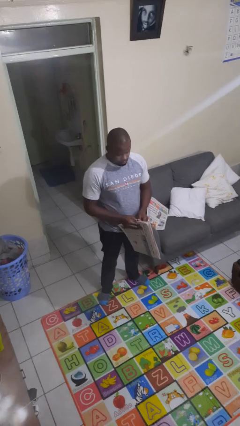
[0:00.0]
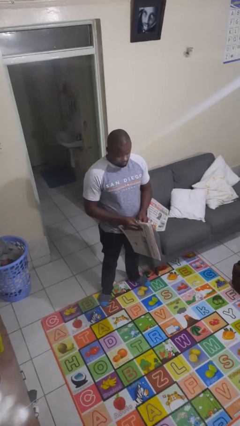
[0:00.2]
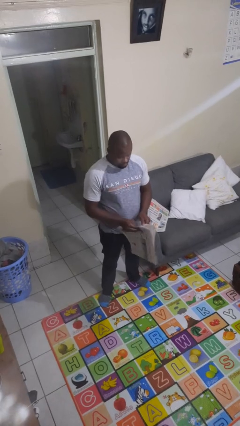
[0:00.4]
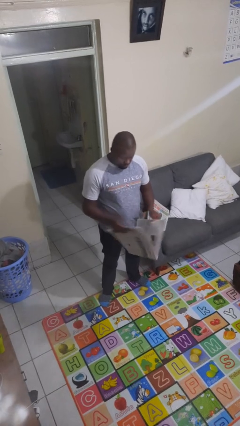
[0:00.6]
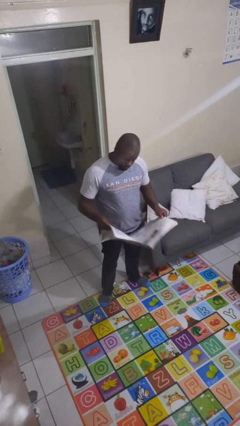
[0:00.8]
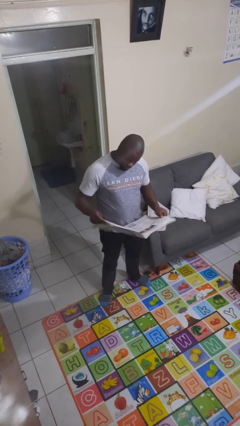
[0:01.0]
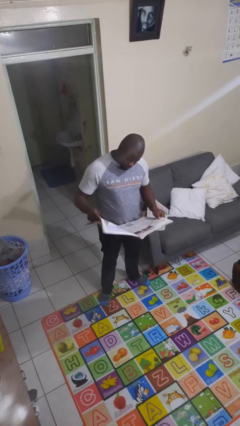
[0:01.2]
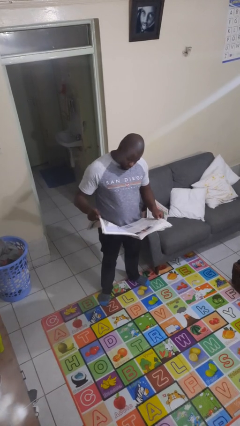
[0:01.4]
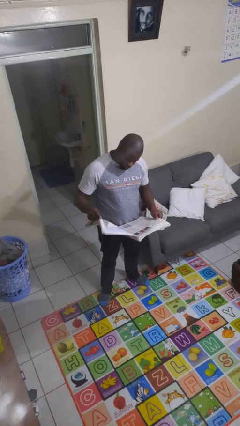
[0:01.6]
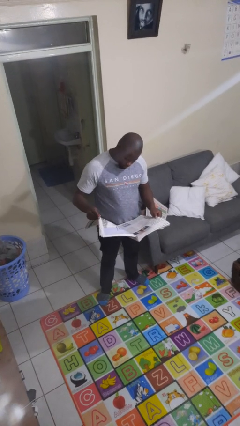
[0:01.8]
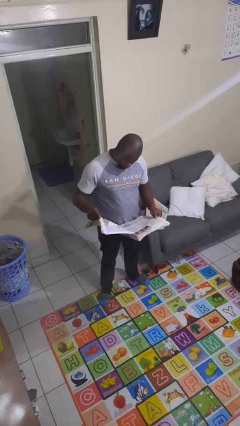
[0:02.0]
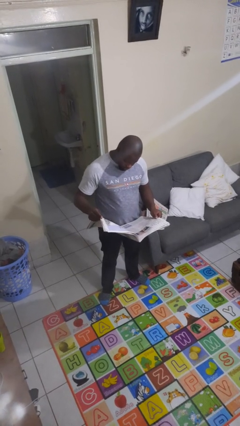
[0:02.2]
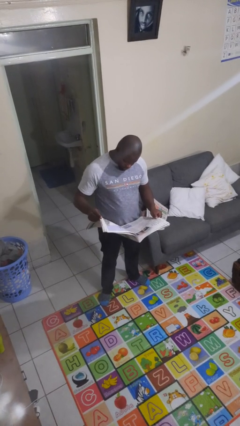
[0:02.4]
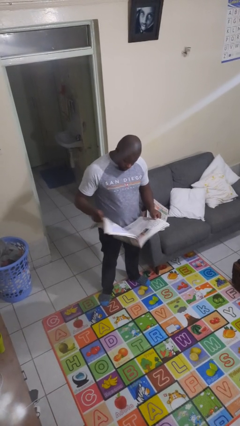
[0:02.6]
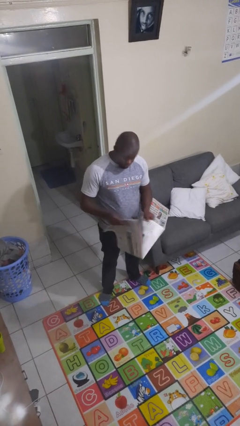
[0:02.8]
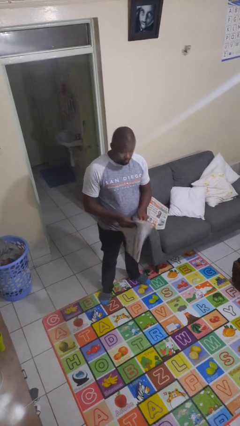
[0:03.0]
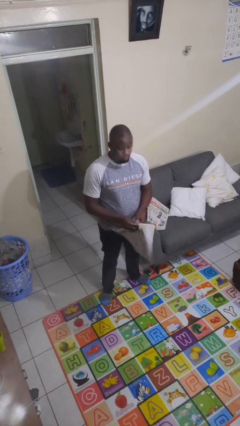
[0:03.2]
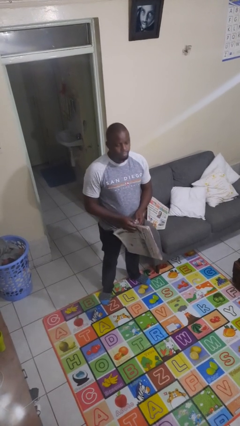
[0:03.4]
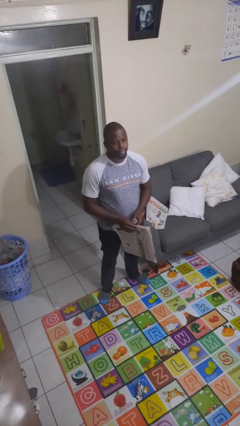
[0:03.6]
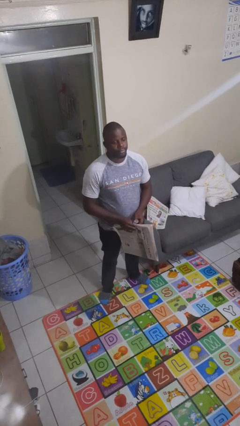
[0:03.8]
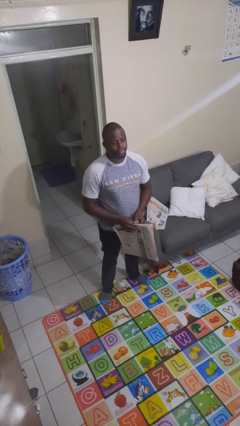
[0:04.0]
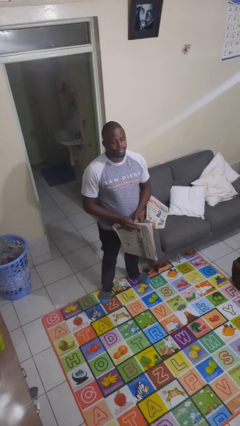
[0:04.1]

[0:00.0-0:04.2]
person reads newspaper

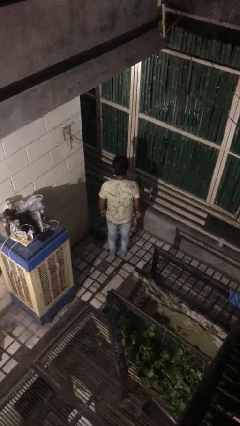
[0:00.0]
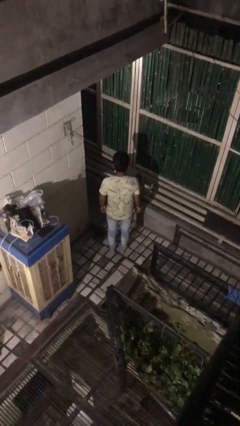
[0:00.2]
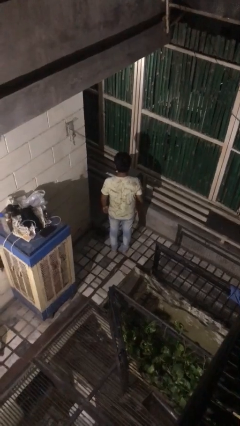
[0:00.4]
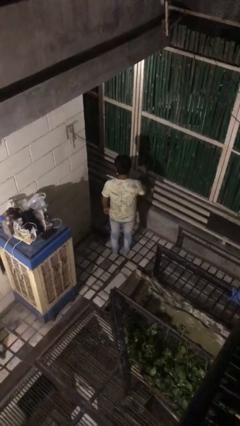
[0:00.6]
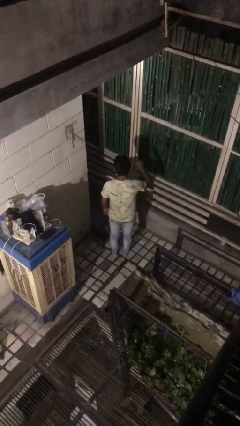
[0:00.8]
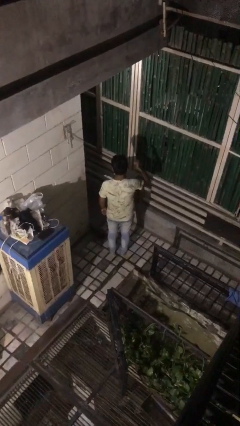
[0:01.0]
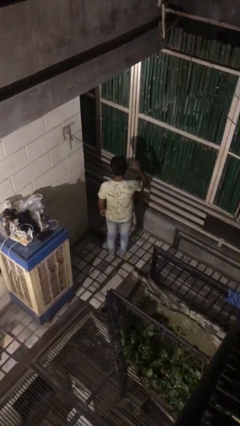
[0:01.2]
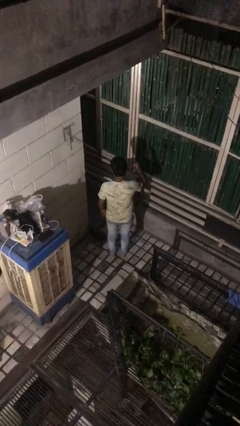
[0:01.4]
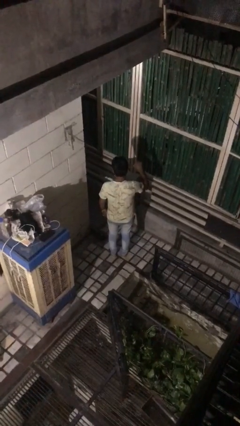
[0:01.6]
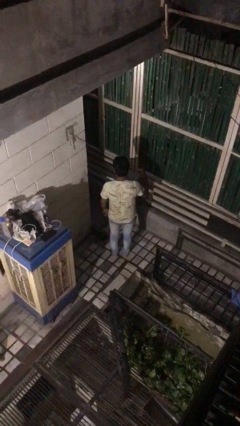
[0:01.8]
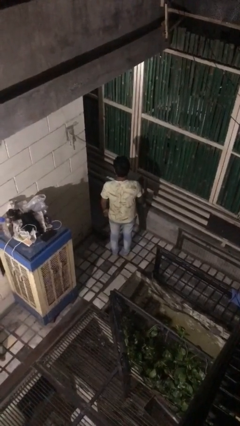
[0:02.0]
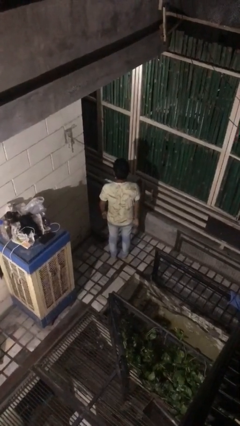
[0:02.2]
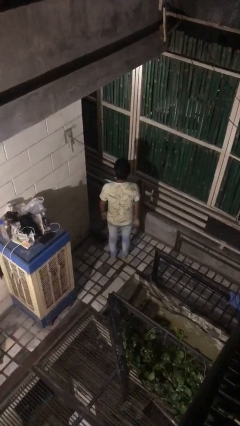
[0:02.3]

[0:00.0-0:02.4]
person gestures behind me

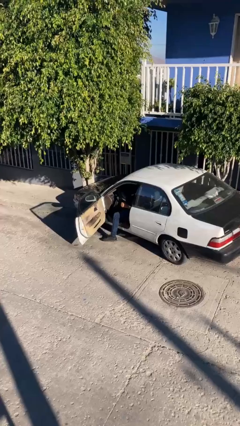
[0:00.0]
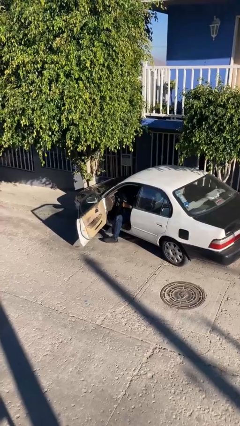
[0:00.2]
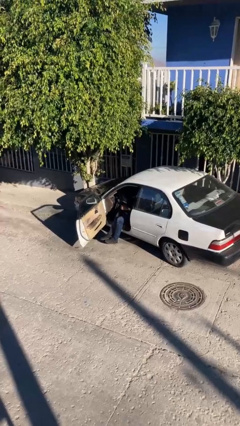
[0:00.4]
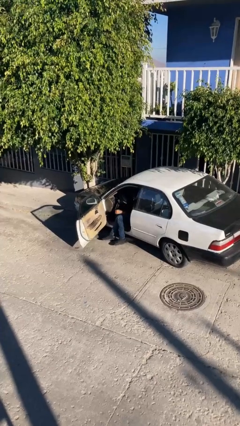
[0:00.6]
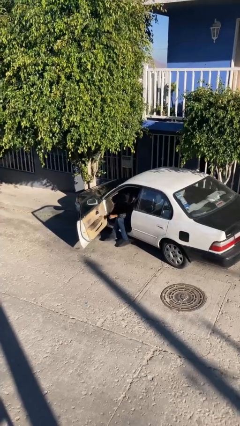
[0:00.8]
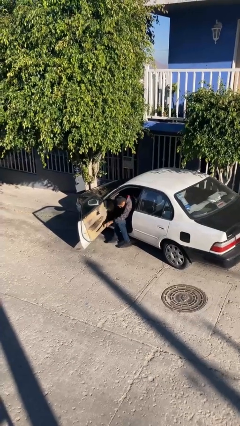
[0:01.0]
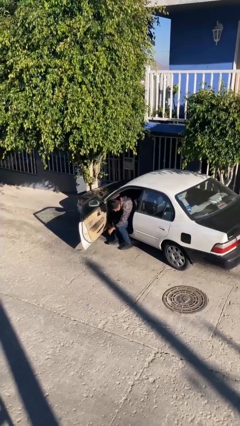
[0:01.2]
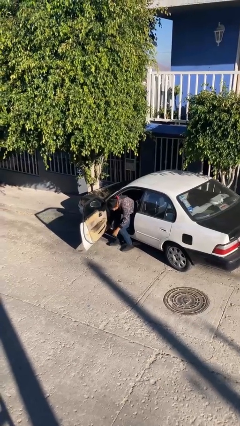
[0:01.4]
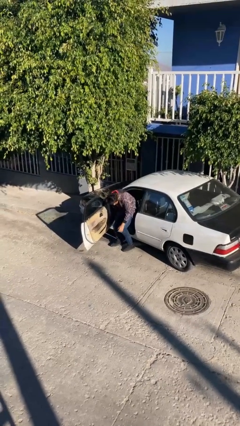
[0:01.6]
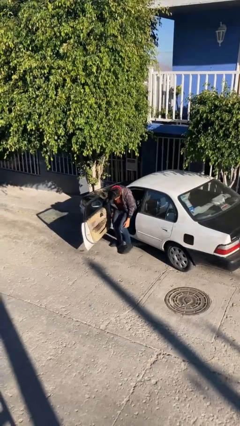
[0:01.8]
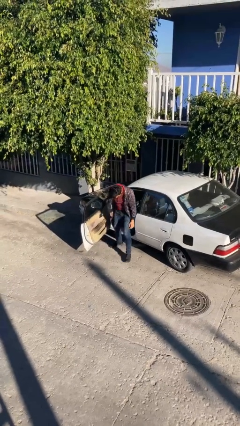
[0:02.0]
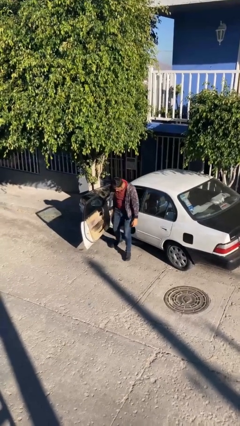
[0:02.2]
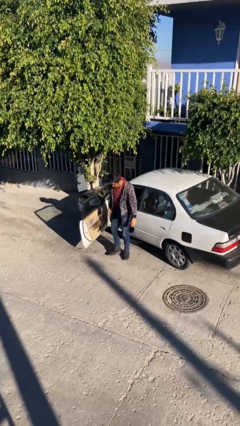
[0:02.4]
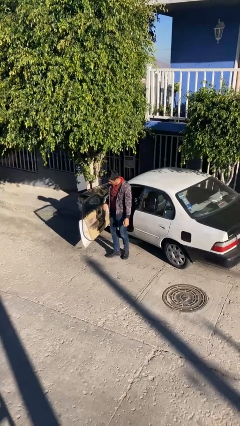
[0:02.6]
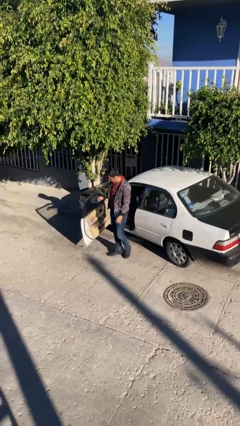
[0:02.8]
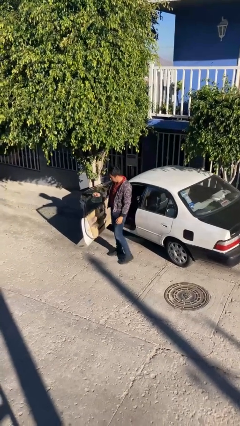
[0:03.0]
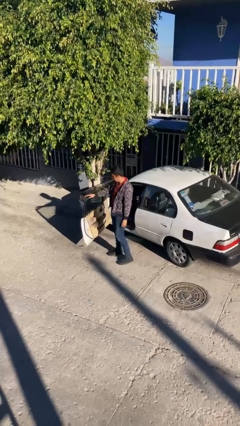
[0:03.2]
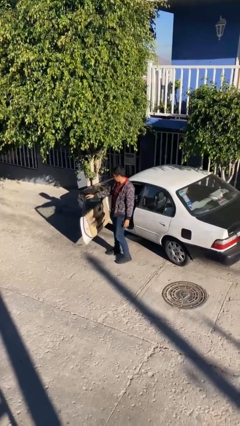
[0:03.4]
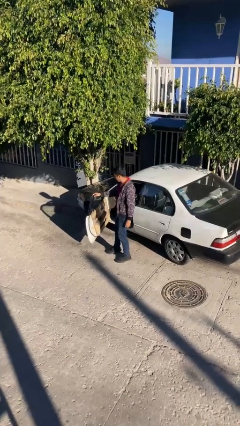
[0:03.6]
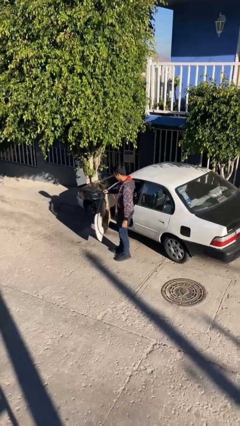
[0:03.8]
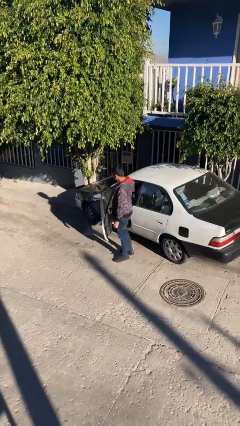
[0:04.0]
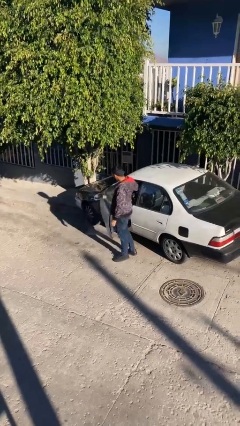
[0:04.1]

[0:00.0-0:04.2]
person exits car

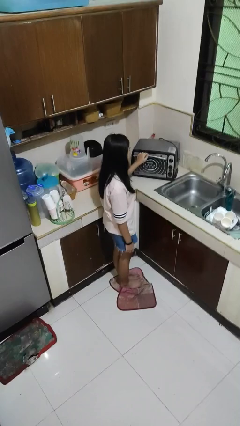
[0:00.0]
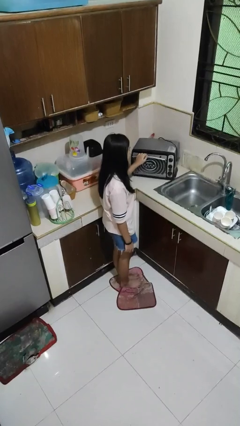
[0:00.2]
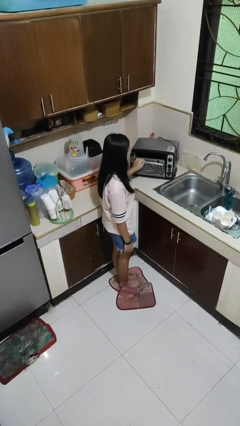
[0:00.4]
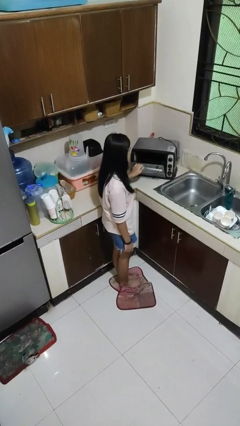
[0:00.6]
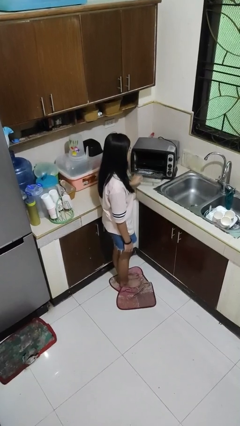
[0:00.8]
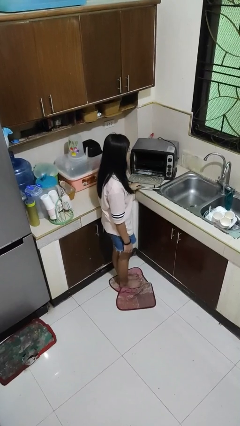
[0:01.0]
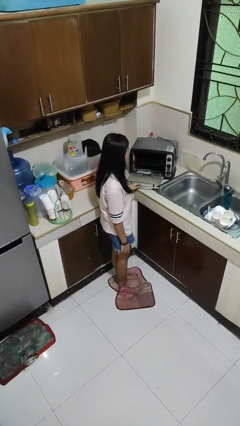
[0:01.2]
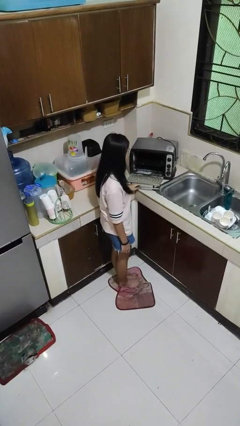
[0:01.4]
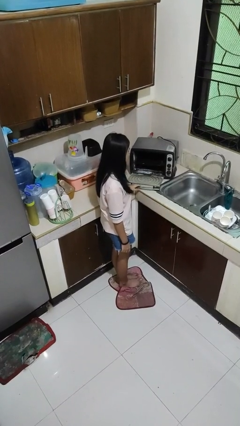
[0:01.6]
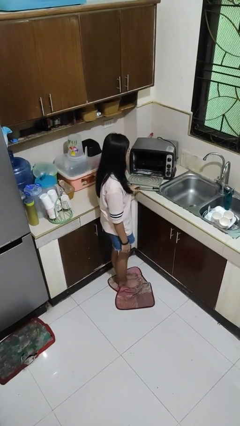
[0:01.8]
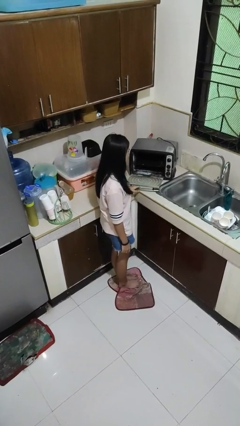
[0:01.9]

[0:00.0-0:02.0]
person opens microwave

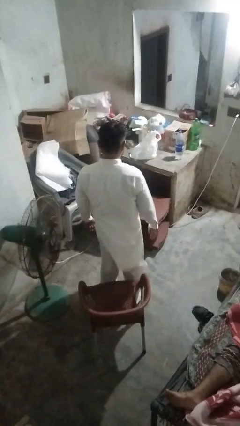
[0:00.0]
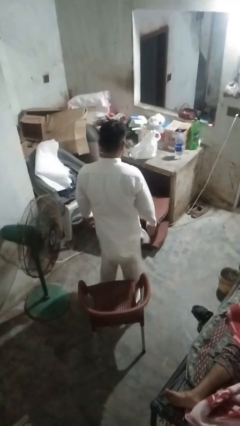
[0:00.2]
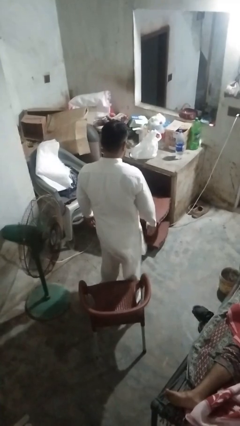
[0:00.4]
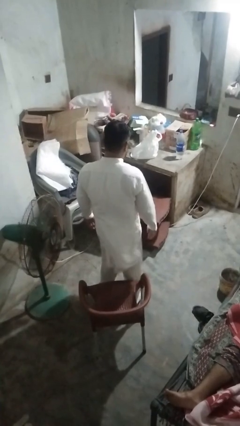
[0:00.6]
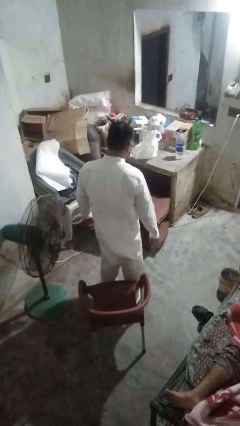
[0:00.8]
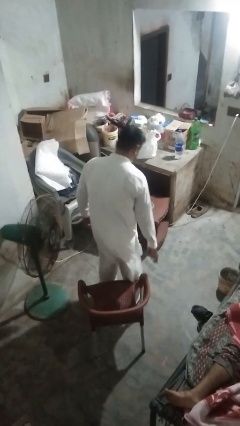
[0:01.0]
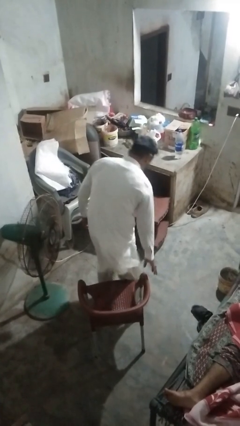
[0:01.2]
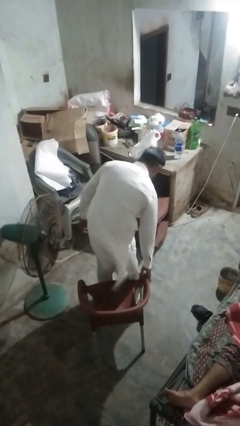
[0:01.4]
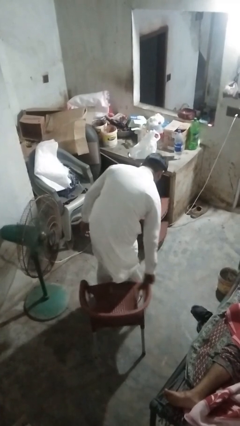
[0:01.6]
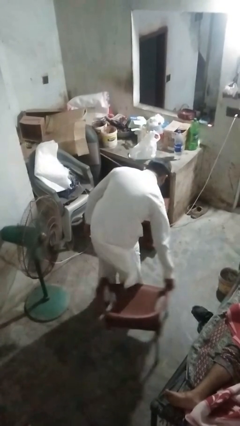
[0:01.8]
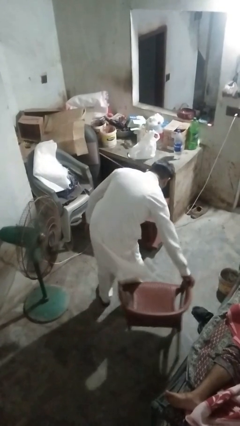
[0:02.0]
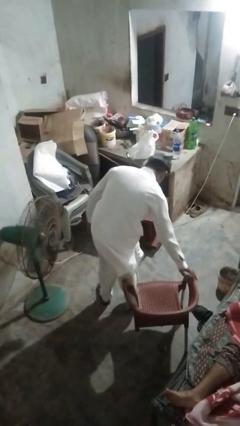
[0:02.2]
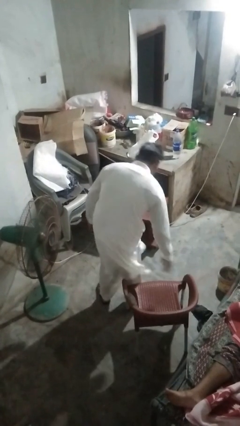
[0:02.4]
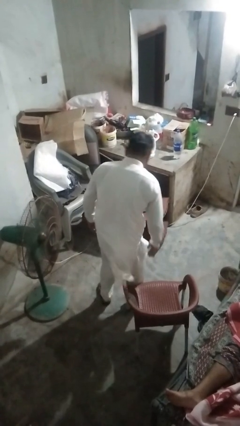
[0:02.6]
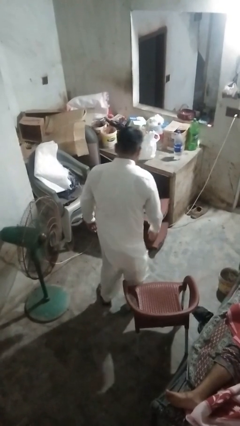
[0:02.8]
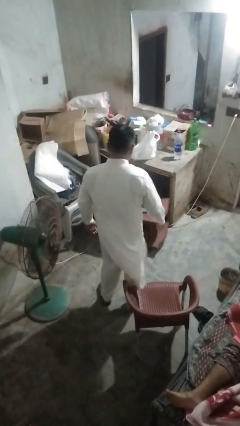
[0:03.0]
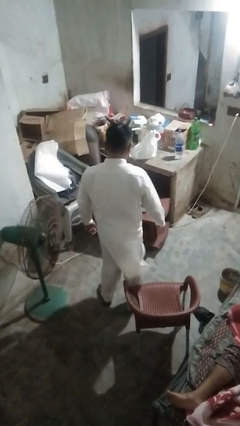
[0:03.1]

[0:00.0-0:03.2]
person pushes in chair

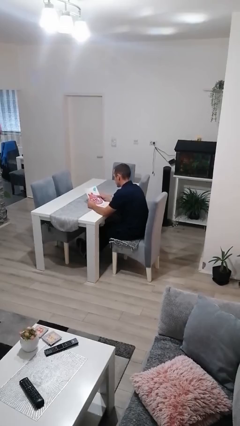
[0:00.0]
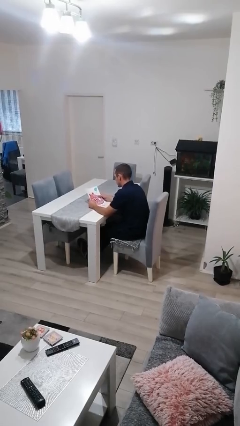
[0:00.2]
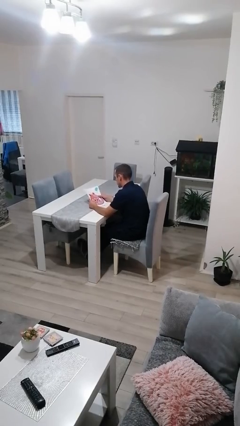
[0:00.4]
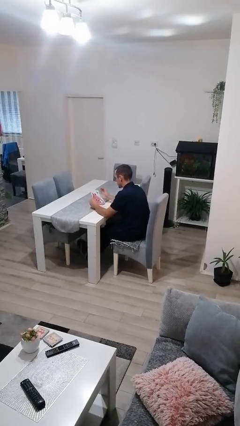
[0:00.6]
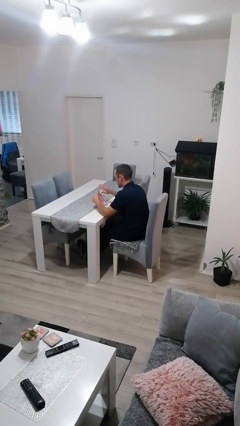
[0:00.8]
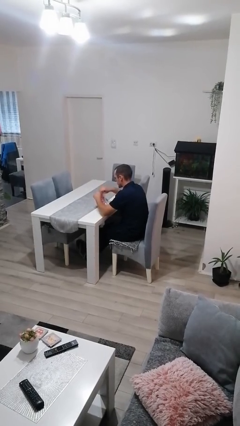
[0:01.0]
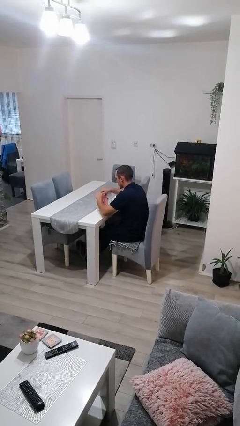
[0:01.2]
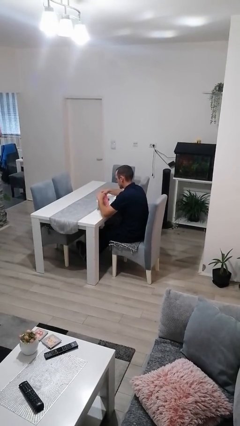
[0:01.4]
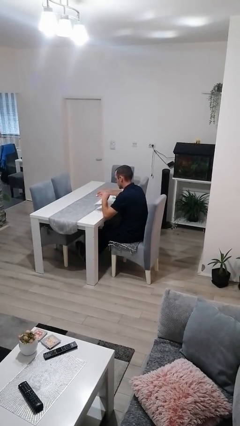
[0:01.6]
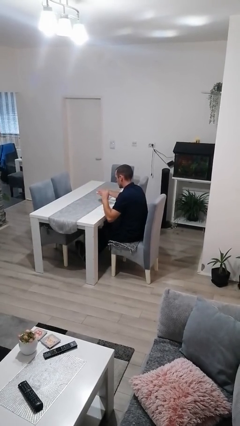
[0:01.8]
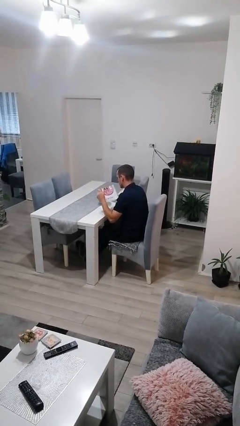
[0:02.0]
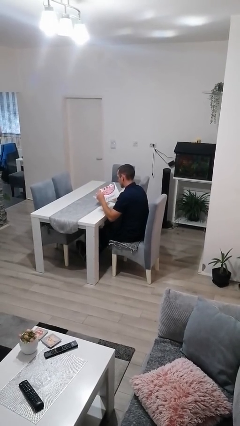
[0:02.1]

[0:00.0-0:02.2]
person tears paper
